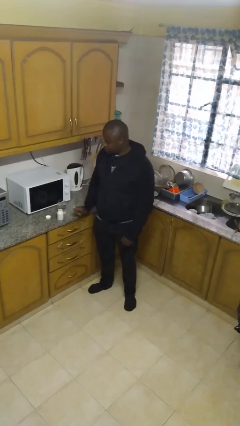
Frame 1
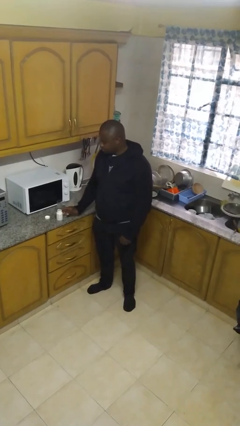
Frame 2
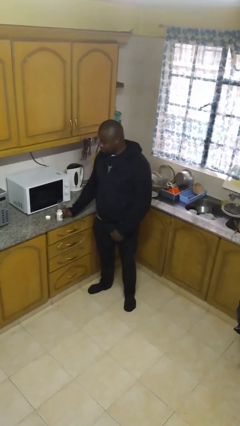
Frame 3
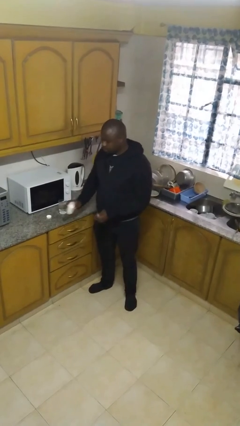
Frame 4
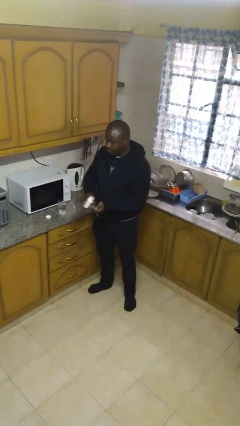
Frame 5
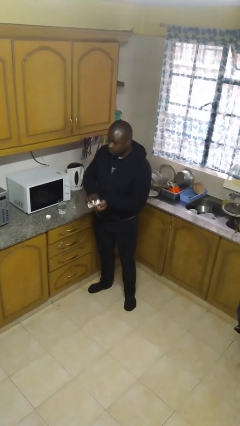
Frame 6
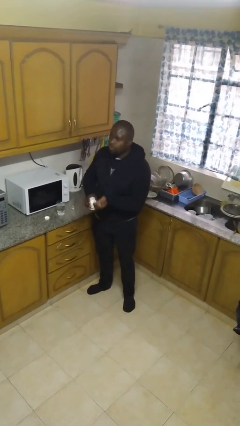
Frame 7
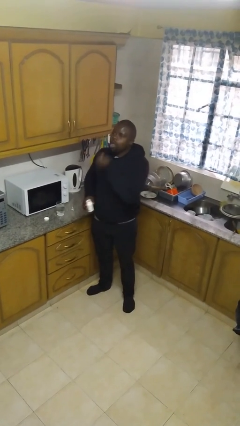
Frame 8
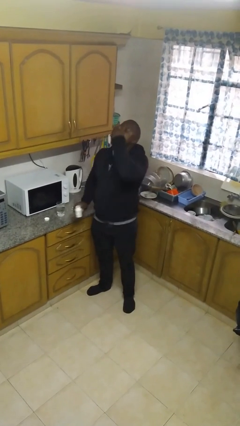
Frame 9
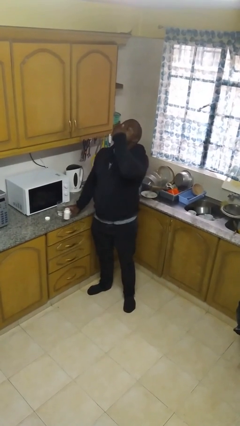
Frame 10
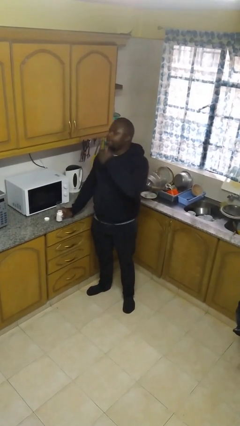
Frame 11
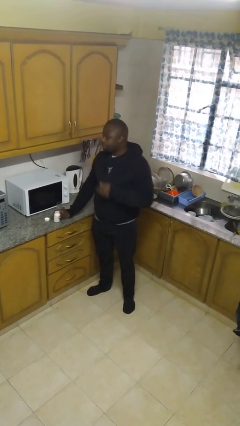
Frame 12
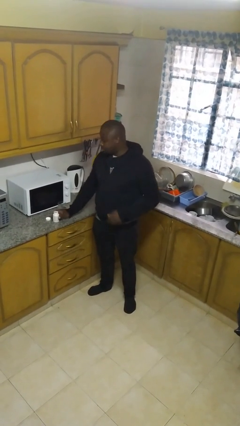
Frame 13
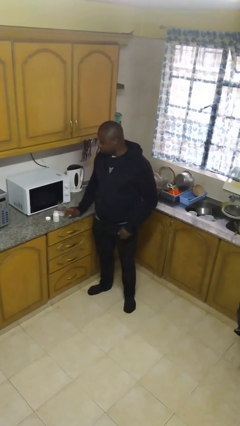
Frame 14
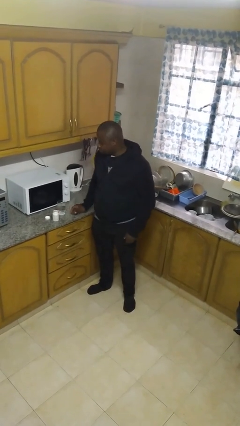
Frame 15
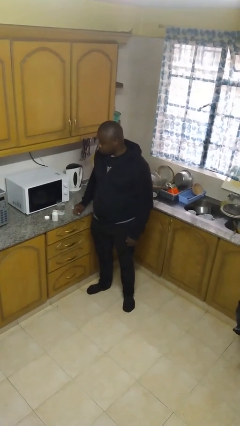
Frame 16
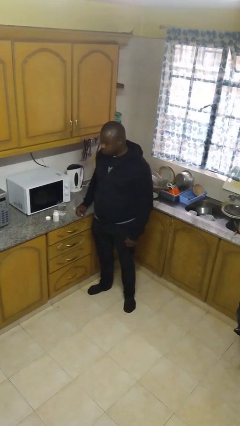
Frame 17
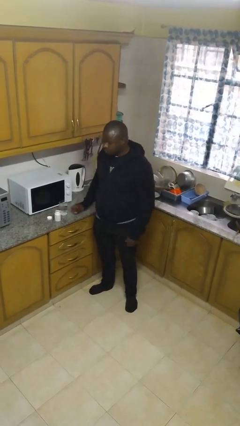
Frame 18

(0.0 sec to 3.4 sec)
person takes medicine pills

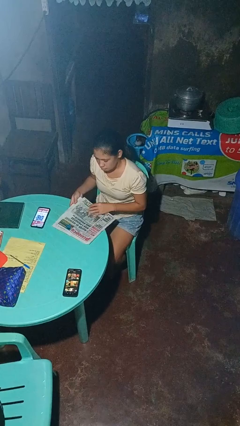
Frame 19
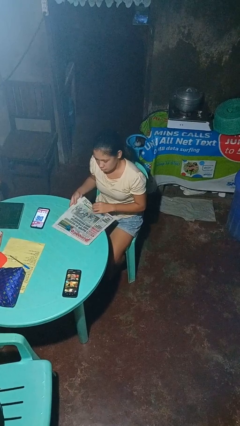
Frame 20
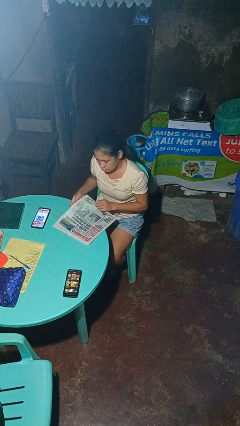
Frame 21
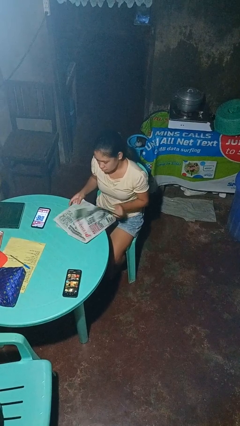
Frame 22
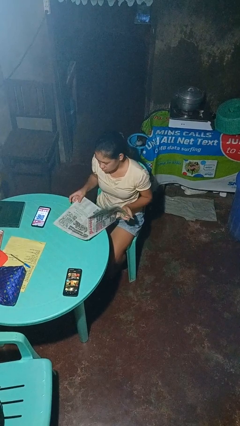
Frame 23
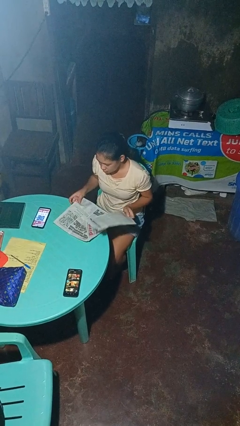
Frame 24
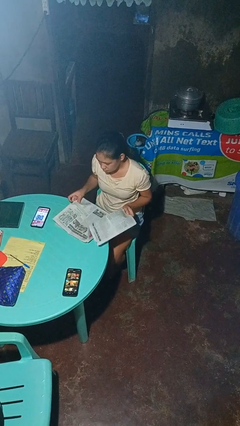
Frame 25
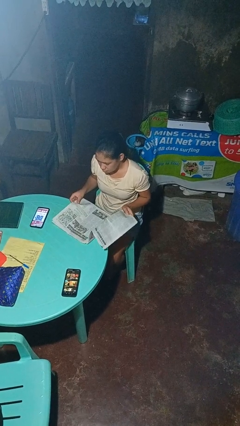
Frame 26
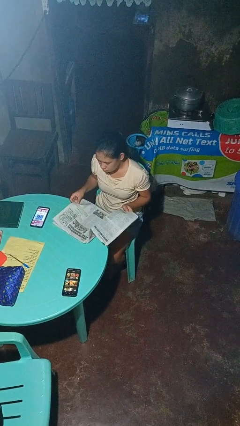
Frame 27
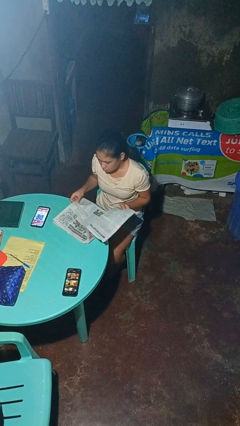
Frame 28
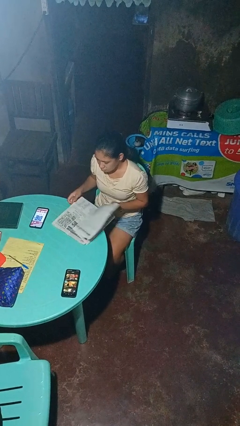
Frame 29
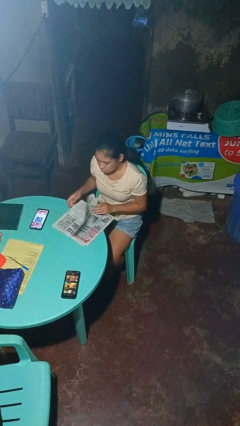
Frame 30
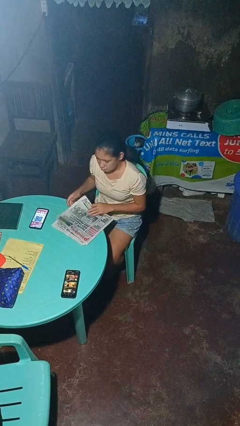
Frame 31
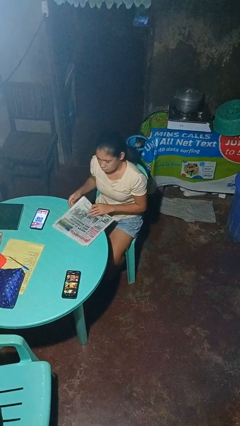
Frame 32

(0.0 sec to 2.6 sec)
person reads newspaper

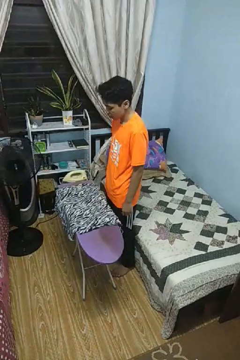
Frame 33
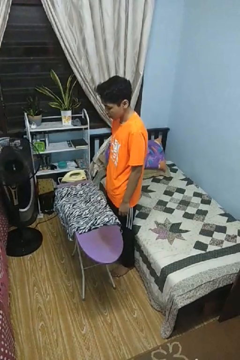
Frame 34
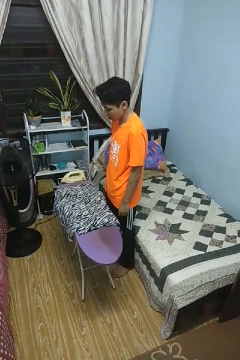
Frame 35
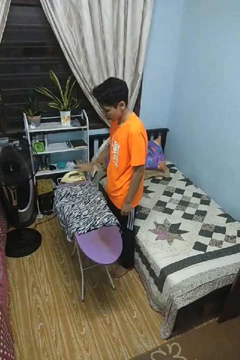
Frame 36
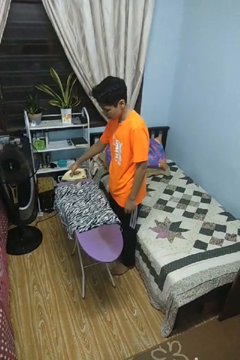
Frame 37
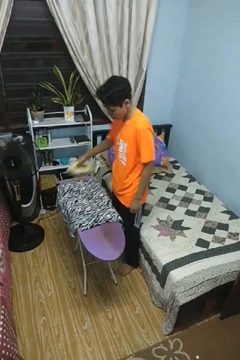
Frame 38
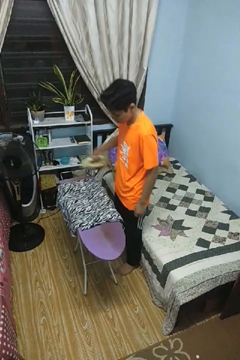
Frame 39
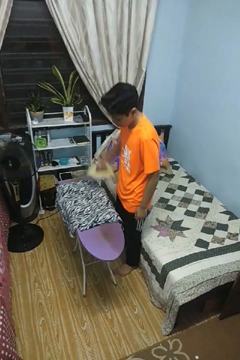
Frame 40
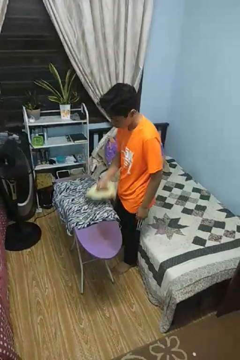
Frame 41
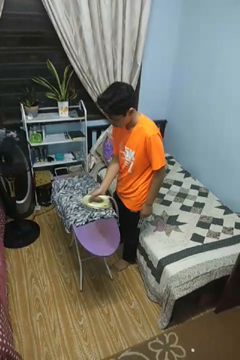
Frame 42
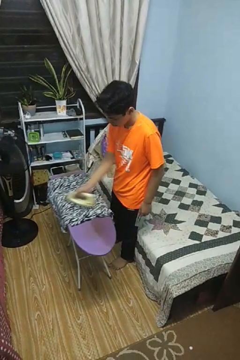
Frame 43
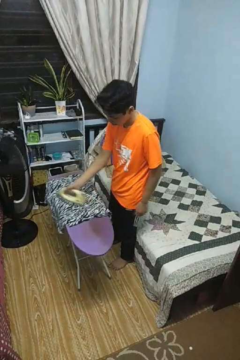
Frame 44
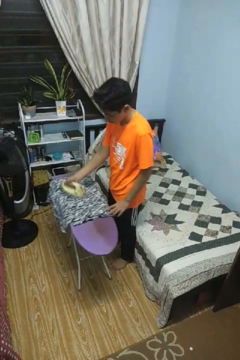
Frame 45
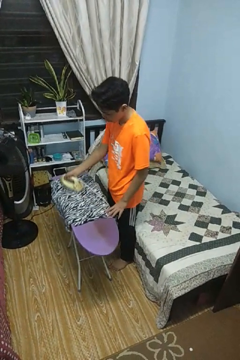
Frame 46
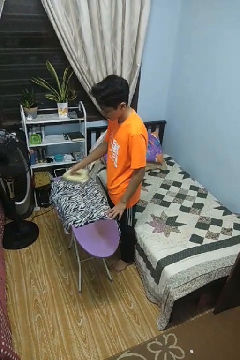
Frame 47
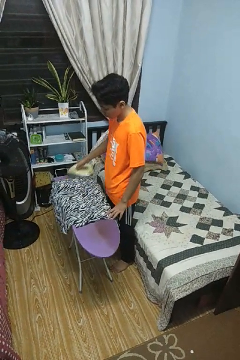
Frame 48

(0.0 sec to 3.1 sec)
person irons clothes

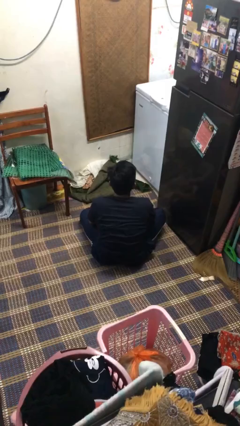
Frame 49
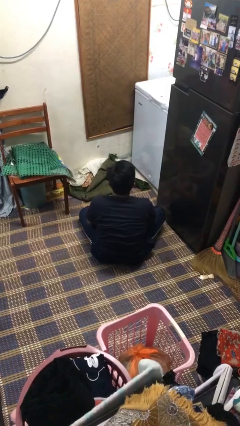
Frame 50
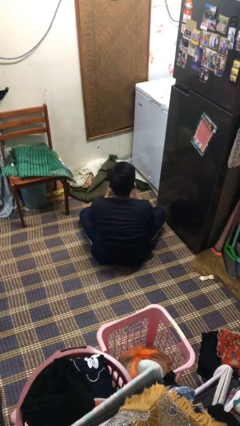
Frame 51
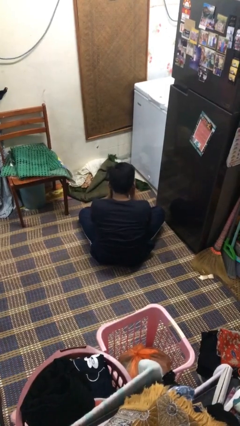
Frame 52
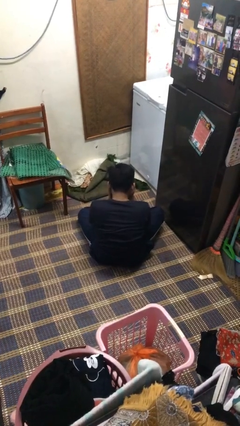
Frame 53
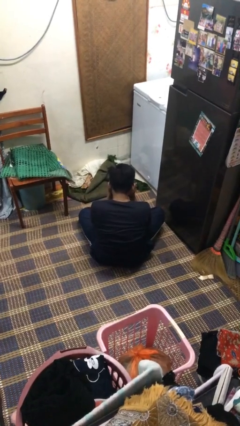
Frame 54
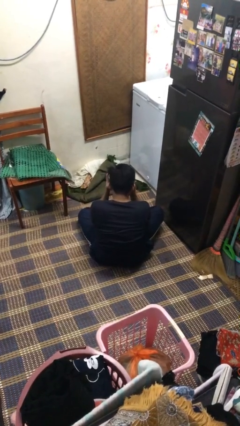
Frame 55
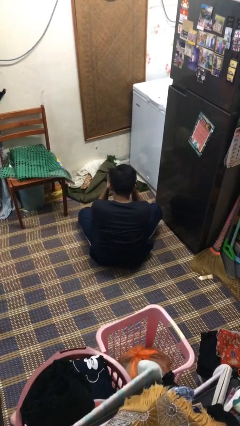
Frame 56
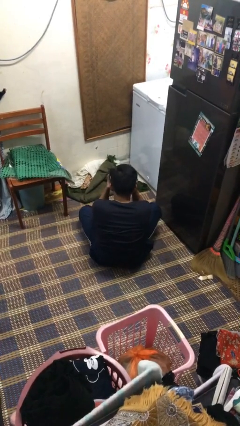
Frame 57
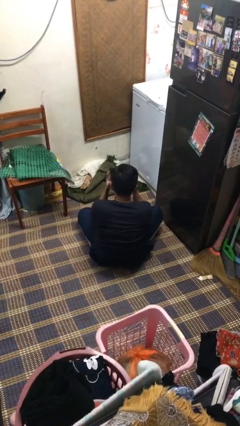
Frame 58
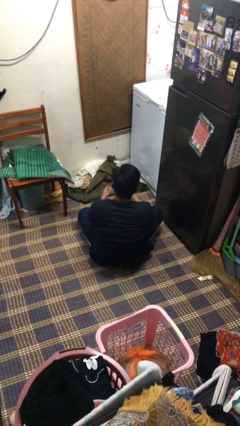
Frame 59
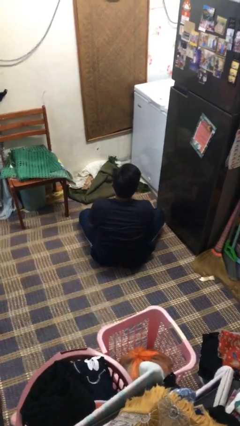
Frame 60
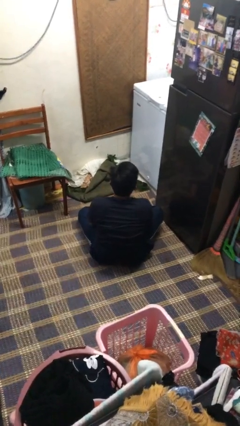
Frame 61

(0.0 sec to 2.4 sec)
person covers face with hands

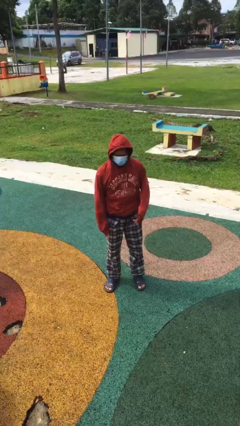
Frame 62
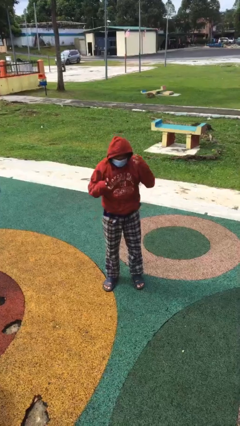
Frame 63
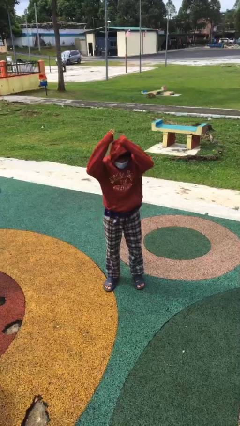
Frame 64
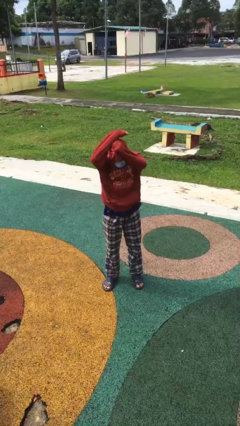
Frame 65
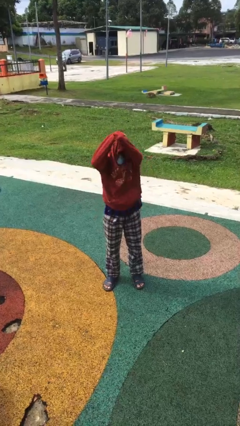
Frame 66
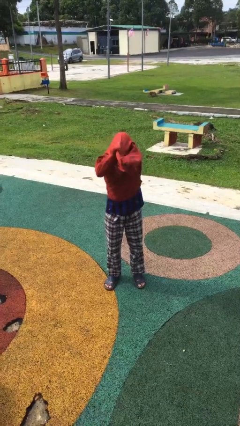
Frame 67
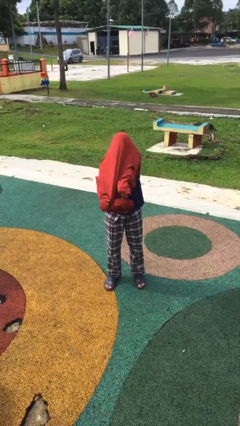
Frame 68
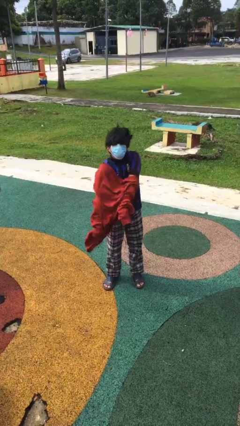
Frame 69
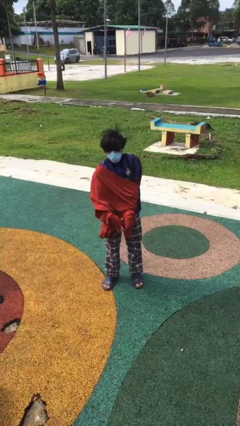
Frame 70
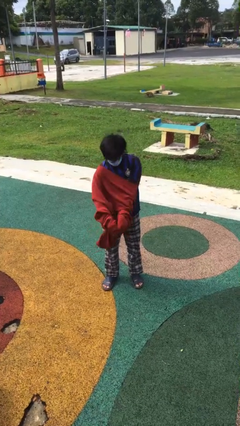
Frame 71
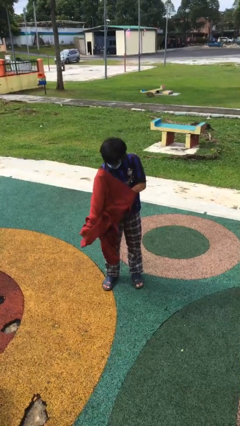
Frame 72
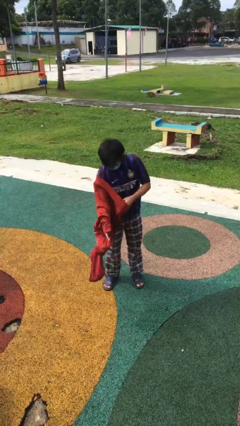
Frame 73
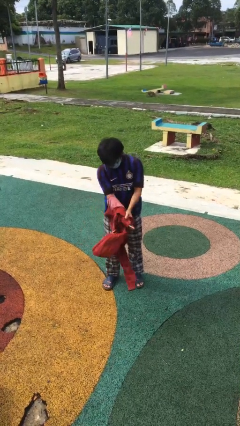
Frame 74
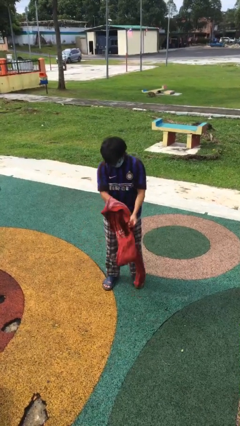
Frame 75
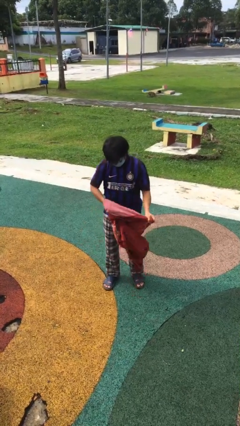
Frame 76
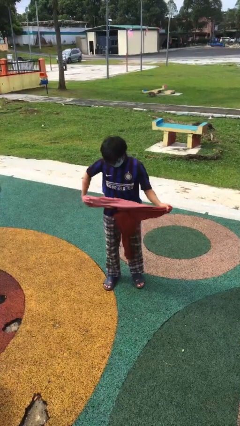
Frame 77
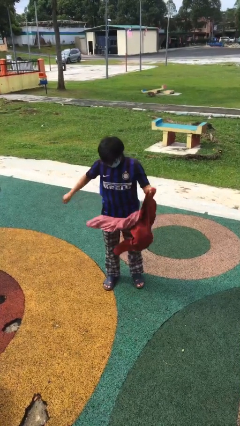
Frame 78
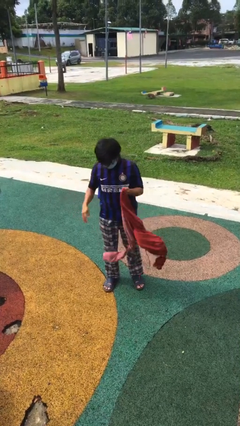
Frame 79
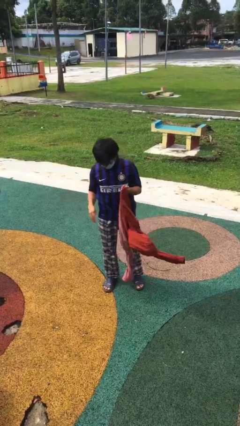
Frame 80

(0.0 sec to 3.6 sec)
person takes off hoodie

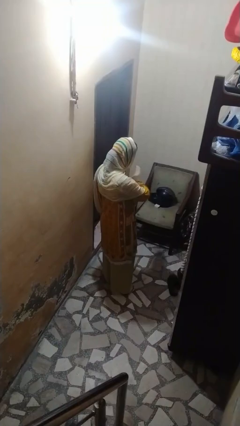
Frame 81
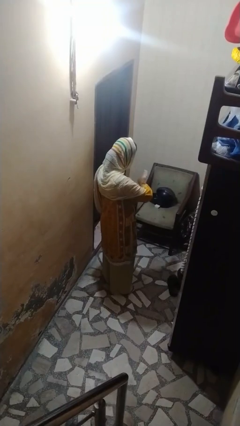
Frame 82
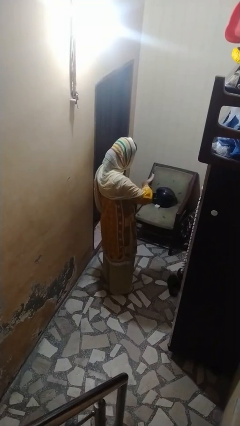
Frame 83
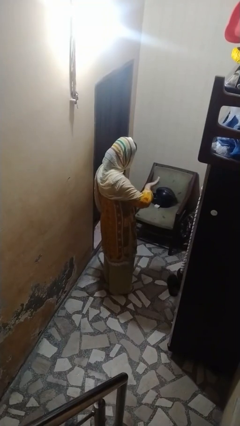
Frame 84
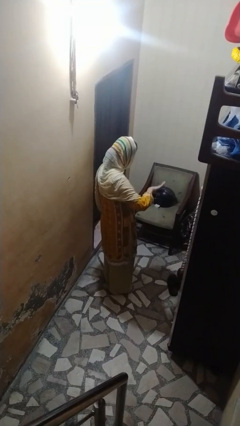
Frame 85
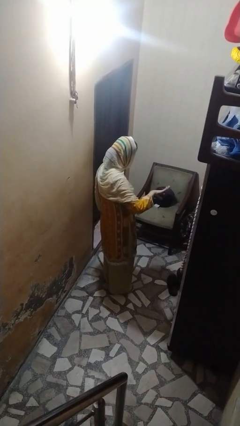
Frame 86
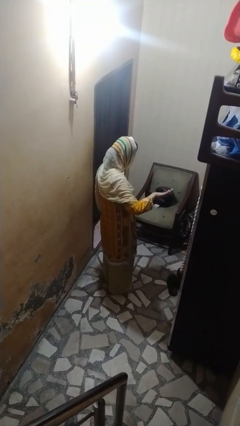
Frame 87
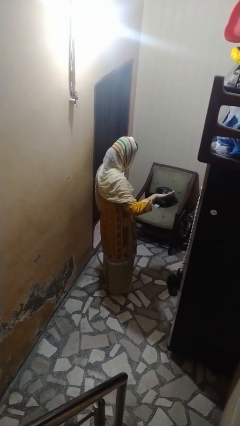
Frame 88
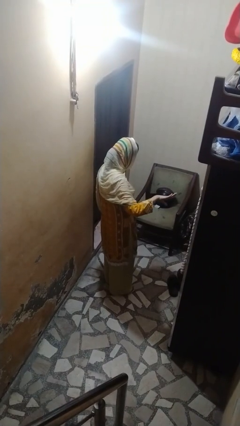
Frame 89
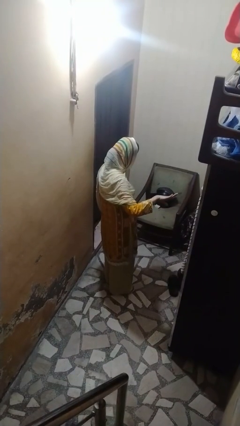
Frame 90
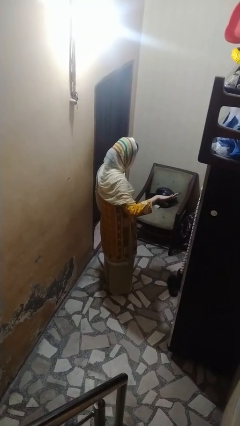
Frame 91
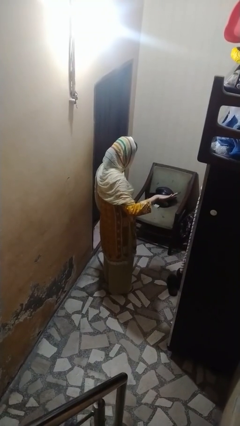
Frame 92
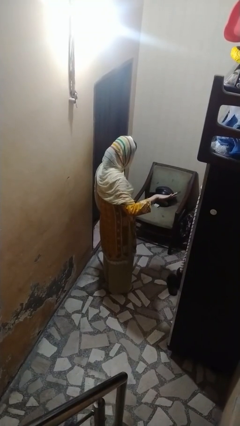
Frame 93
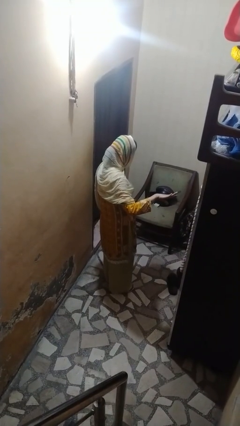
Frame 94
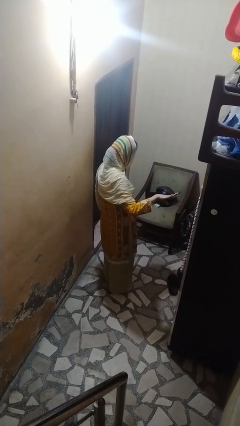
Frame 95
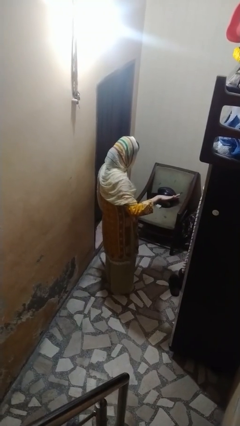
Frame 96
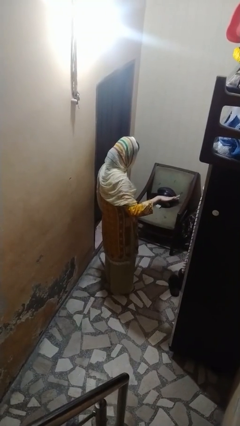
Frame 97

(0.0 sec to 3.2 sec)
person gestures swipe right
